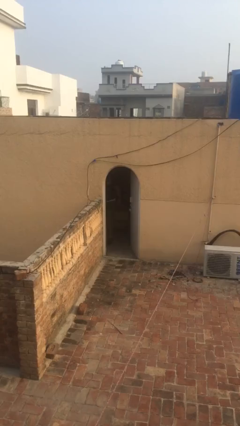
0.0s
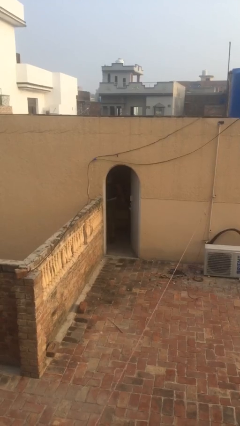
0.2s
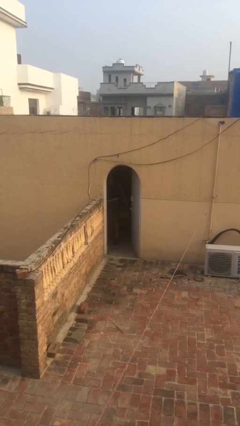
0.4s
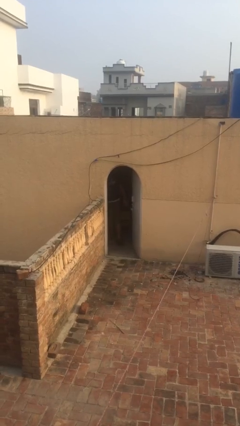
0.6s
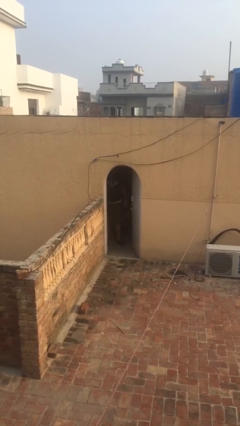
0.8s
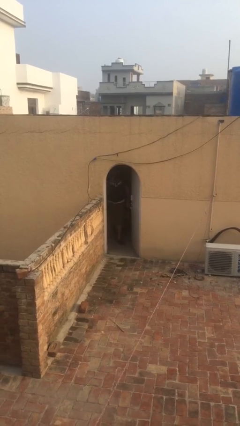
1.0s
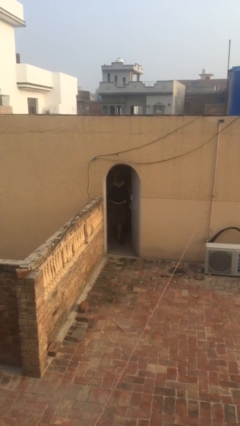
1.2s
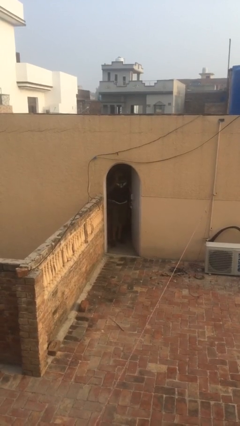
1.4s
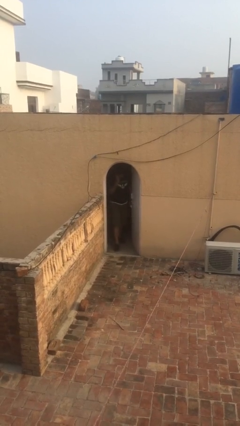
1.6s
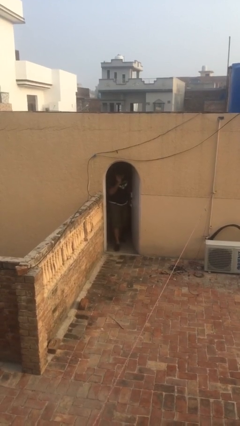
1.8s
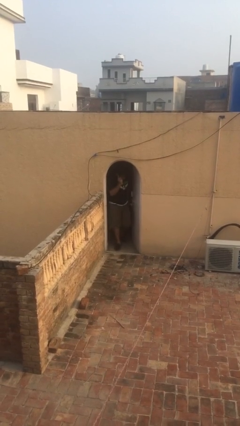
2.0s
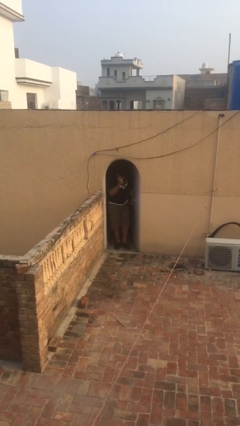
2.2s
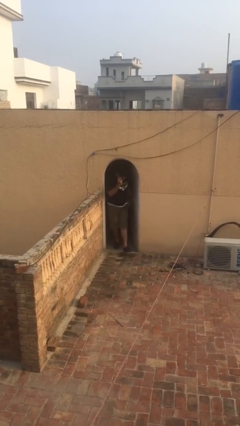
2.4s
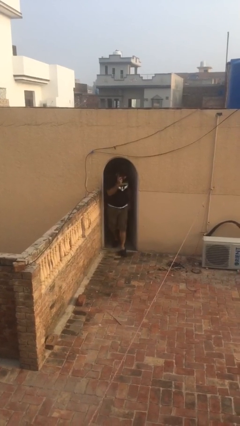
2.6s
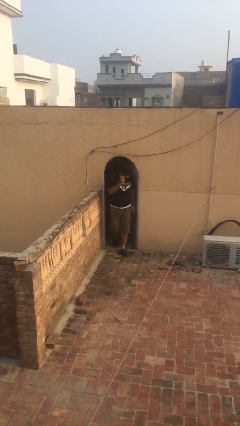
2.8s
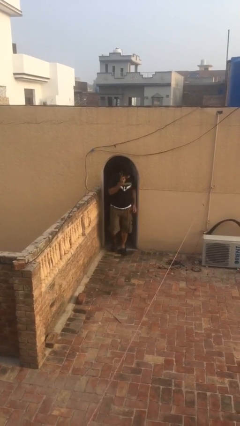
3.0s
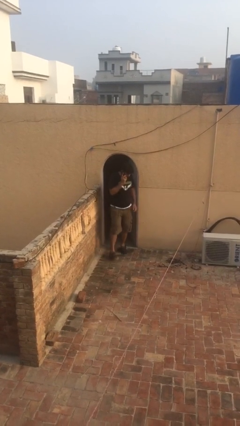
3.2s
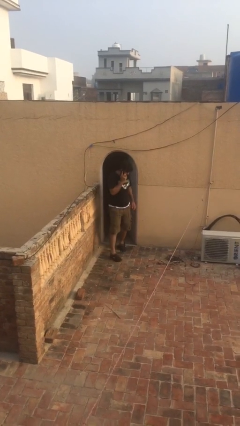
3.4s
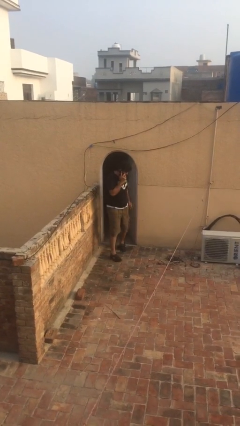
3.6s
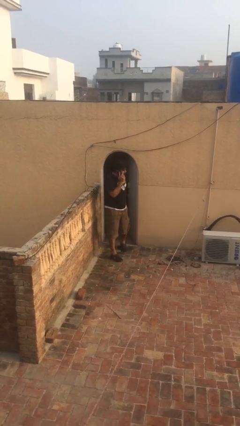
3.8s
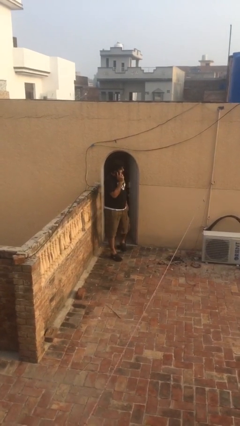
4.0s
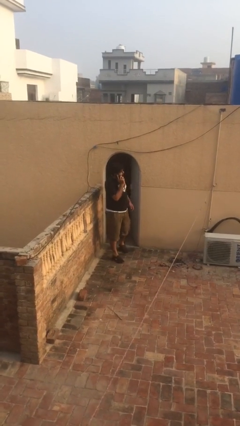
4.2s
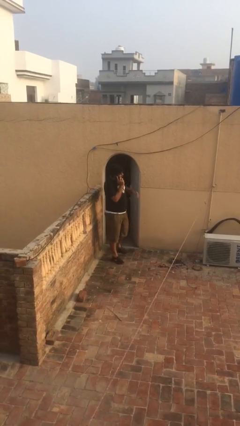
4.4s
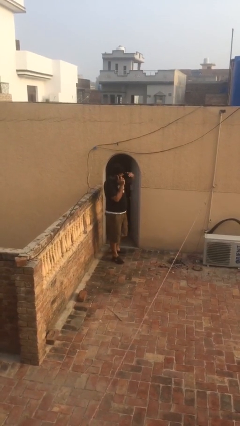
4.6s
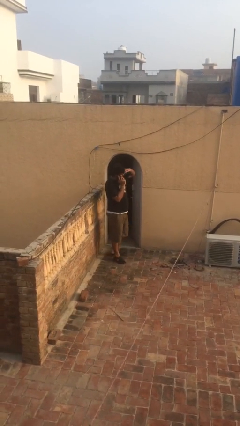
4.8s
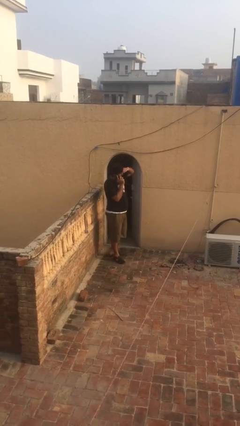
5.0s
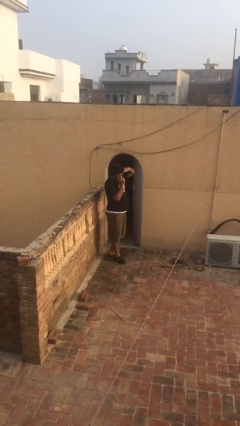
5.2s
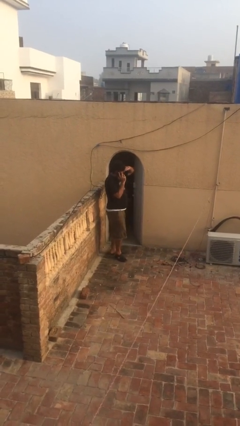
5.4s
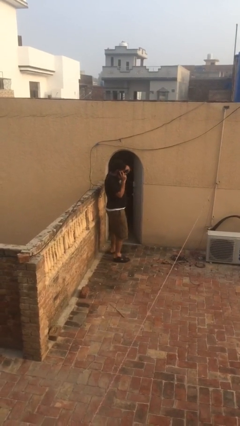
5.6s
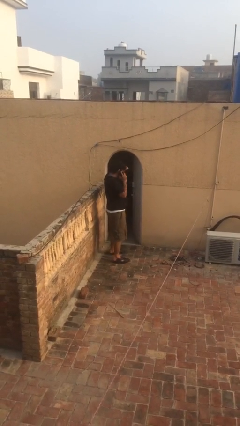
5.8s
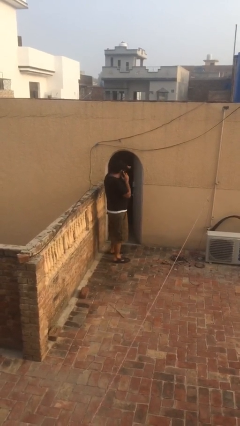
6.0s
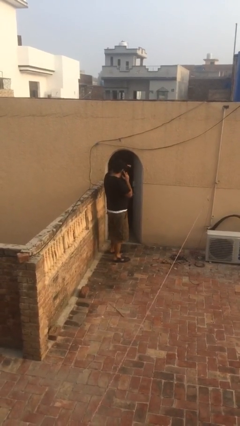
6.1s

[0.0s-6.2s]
person enters scene through structure

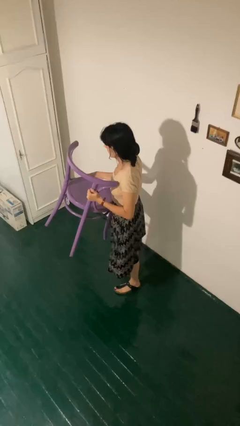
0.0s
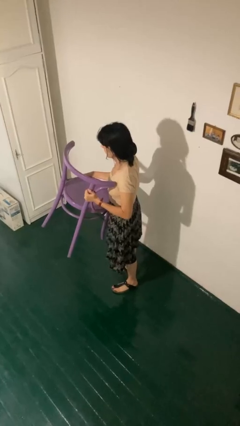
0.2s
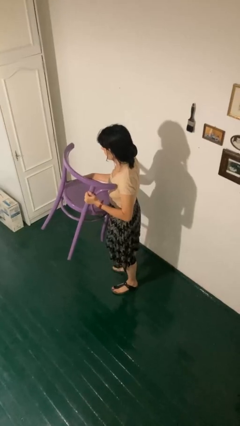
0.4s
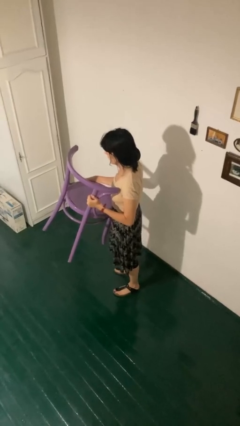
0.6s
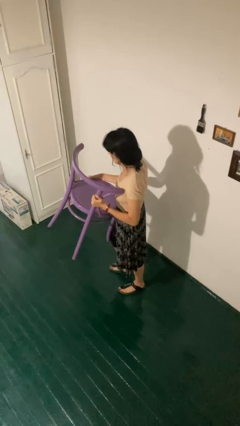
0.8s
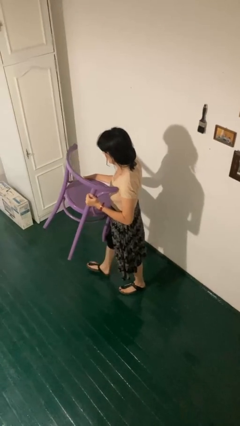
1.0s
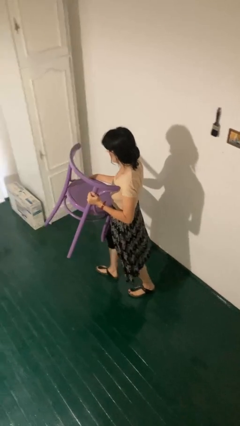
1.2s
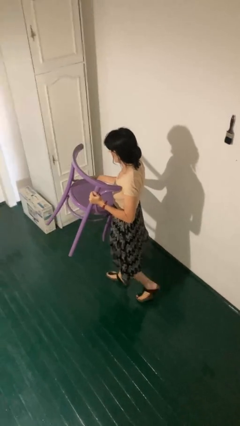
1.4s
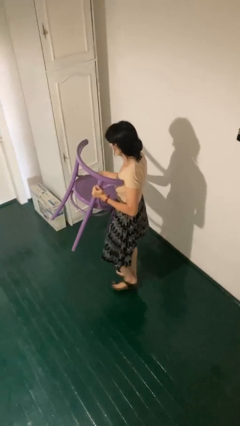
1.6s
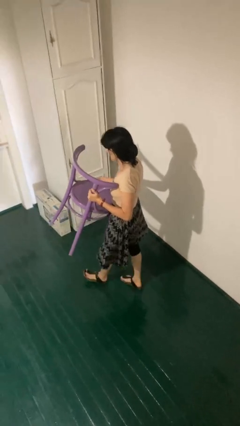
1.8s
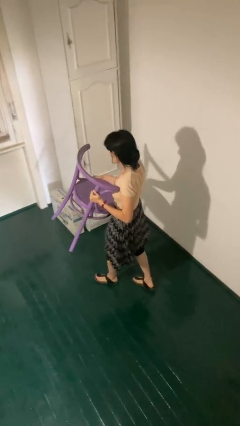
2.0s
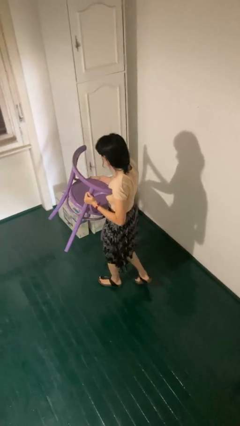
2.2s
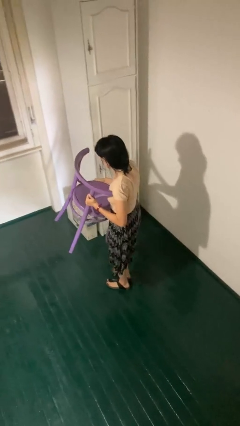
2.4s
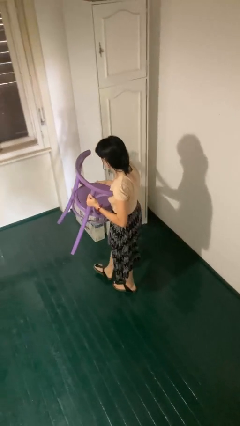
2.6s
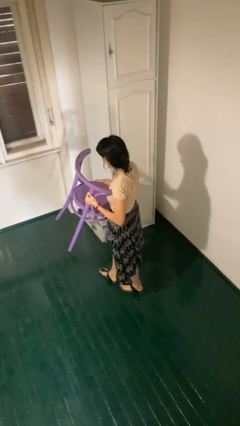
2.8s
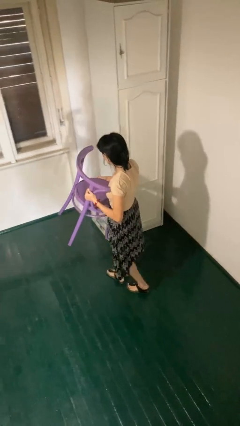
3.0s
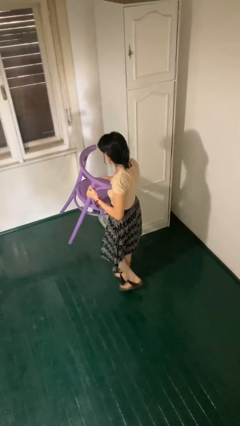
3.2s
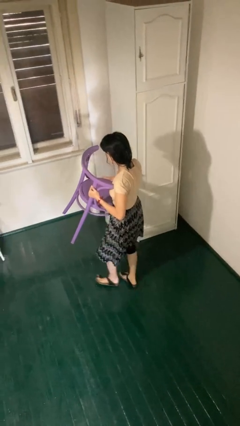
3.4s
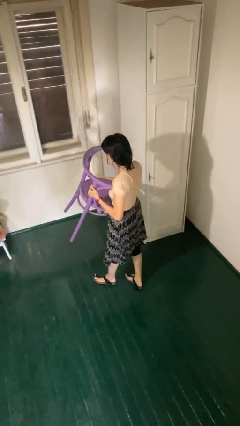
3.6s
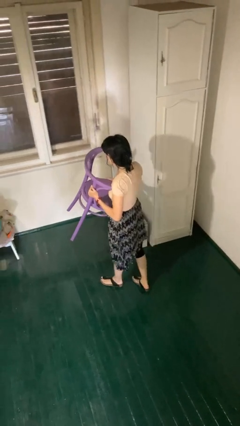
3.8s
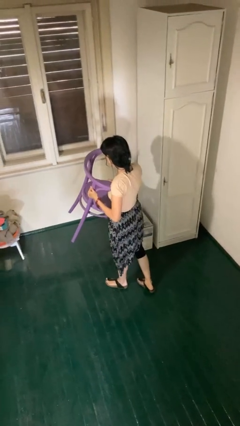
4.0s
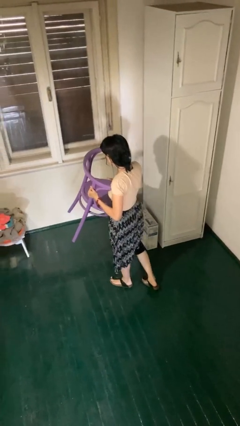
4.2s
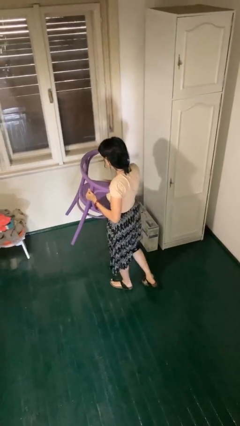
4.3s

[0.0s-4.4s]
person carries furniture

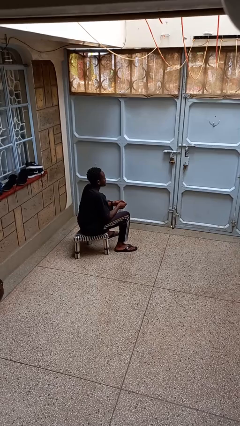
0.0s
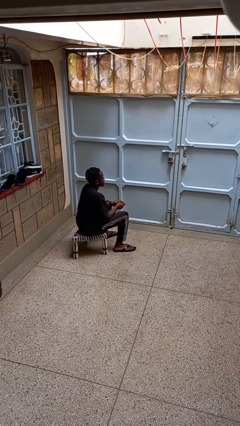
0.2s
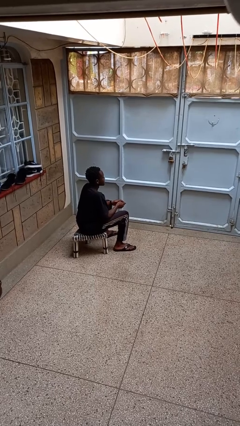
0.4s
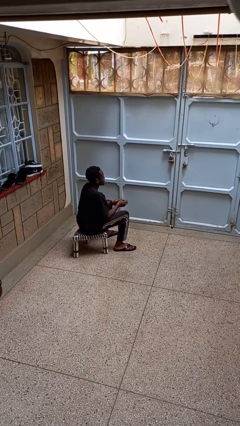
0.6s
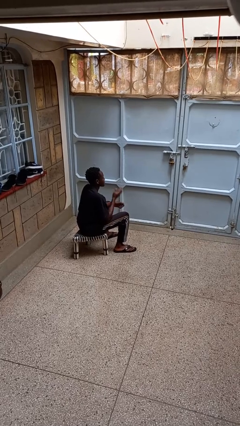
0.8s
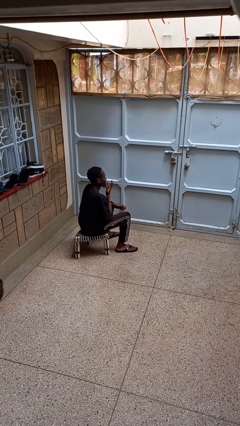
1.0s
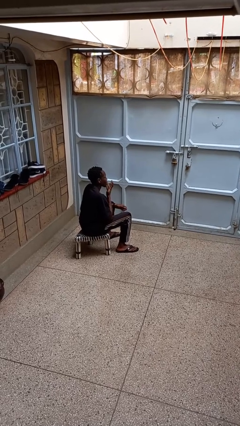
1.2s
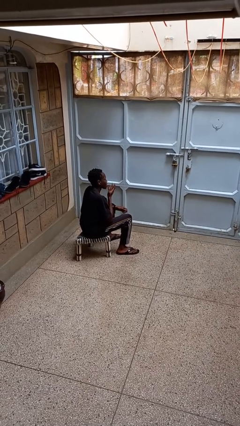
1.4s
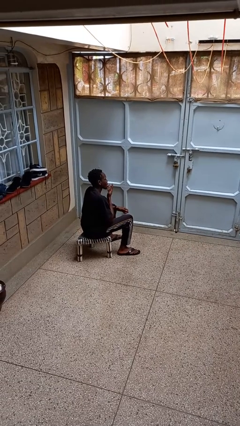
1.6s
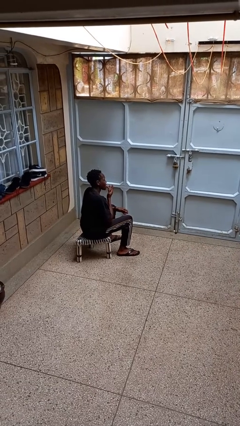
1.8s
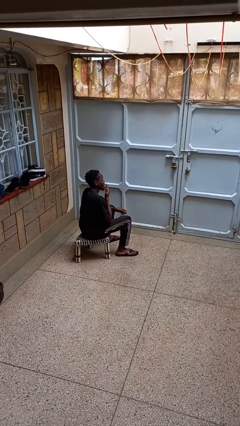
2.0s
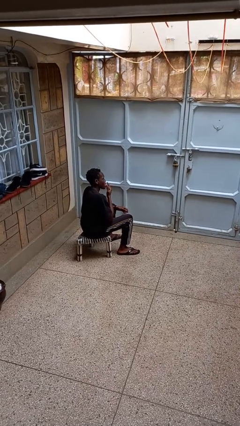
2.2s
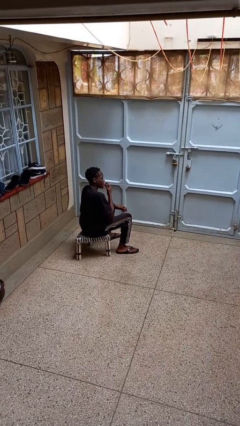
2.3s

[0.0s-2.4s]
person licks fingers

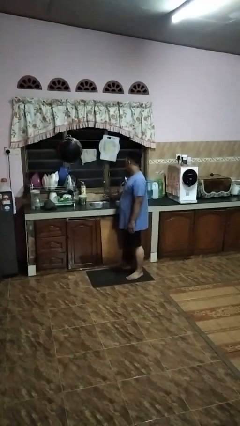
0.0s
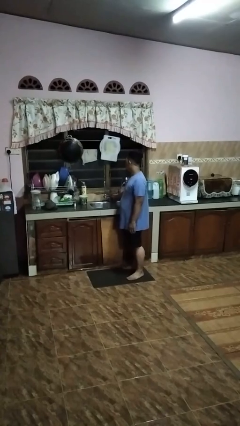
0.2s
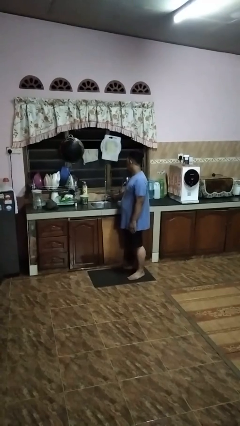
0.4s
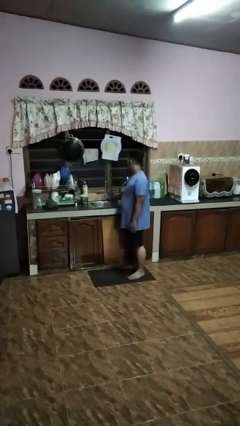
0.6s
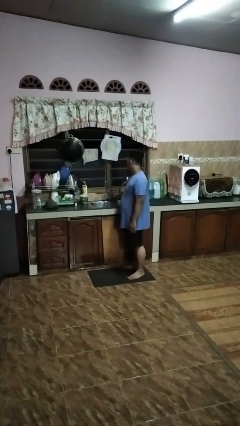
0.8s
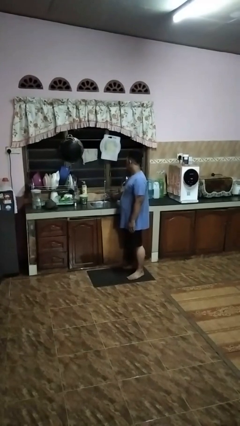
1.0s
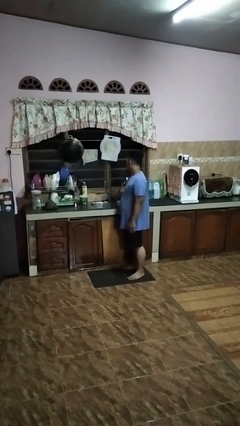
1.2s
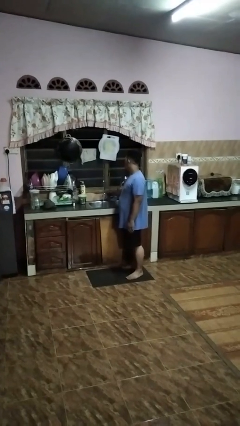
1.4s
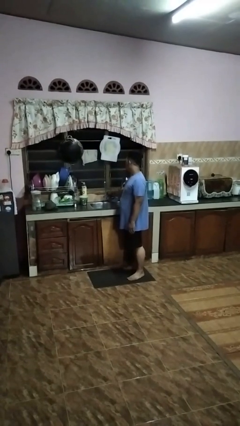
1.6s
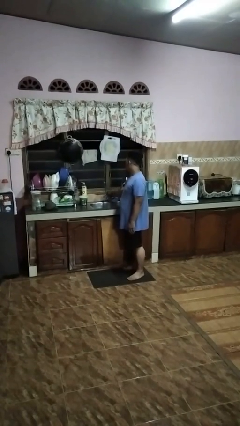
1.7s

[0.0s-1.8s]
person turns on faucet

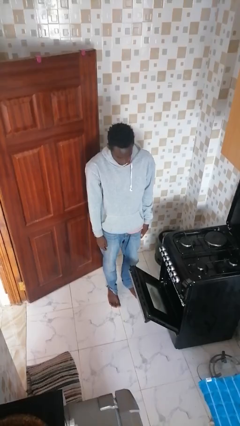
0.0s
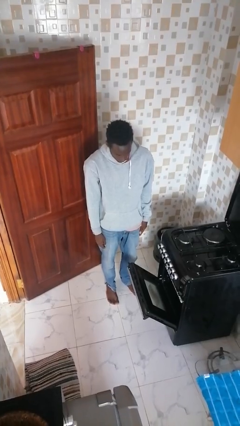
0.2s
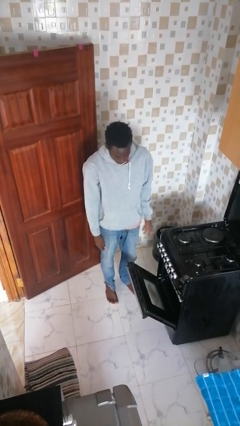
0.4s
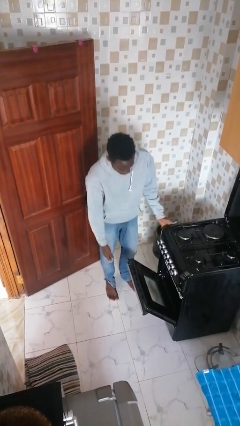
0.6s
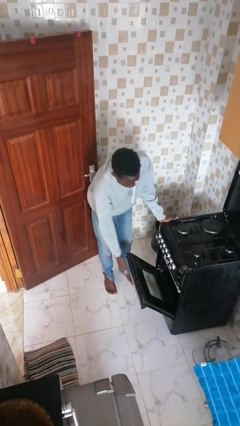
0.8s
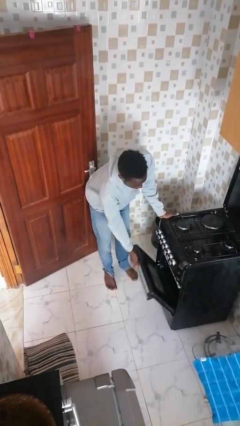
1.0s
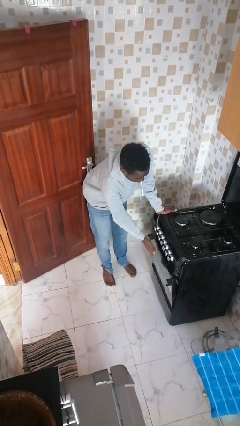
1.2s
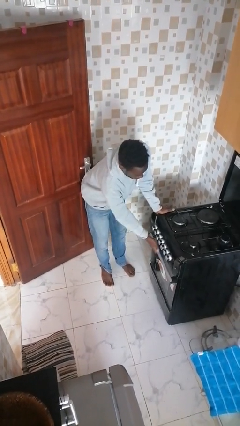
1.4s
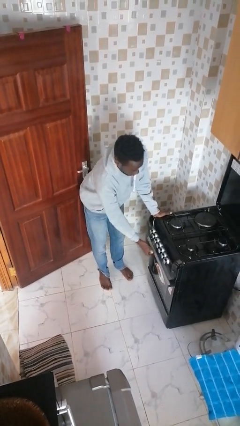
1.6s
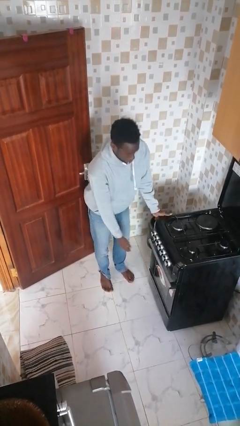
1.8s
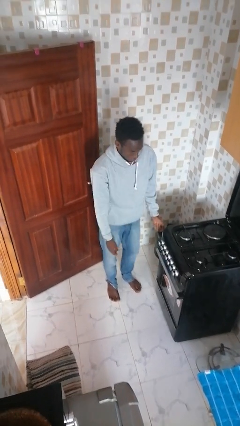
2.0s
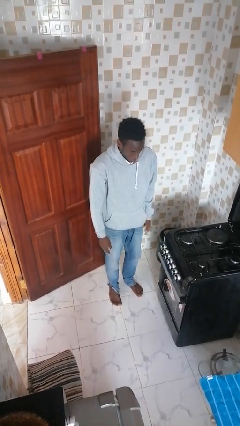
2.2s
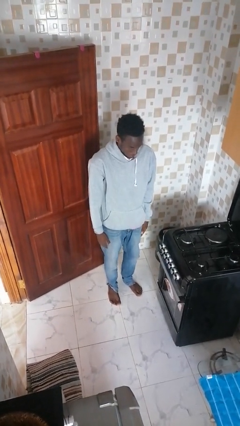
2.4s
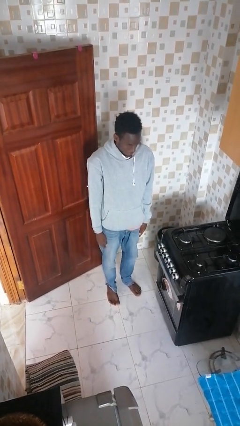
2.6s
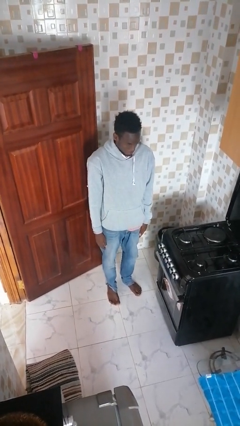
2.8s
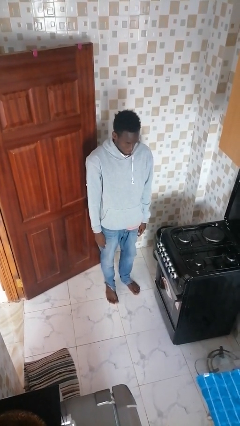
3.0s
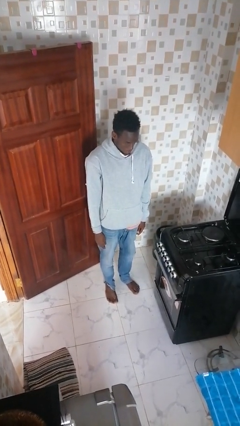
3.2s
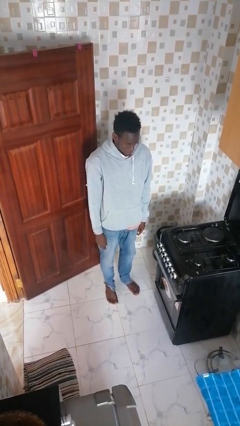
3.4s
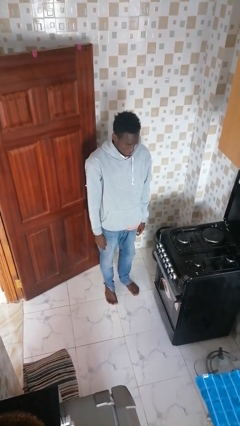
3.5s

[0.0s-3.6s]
person closes oven door
